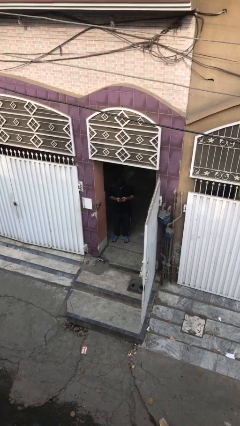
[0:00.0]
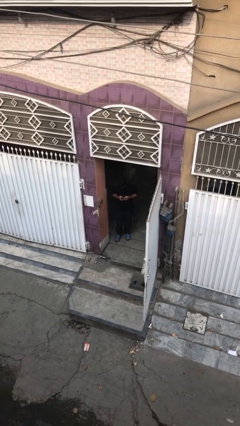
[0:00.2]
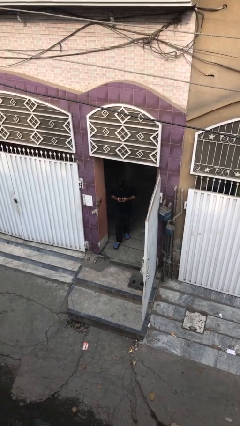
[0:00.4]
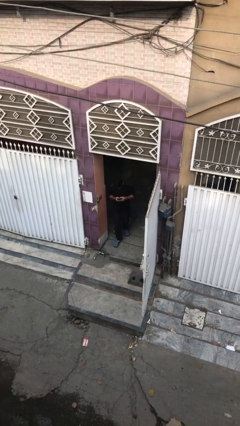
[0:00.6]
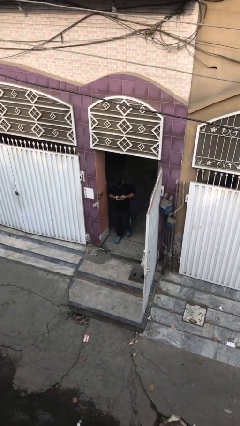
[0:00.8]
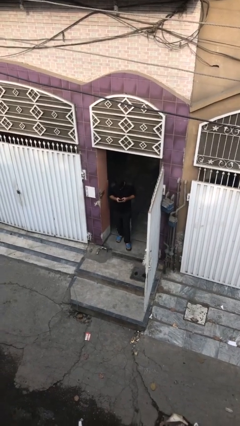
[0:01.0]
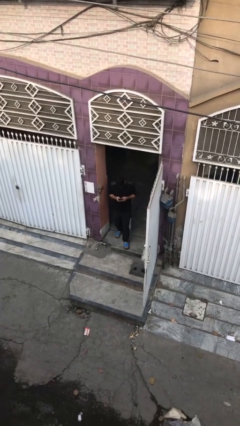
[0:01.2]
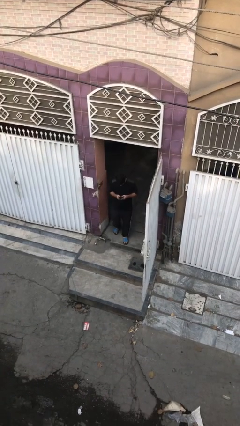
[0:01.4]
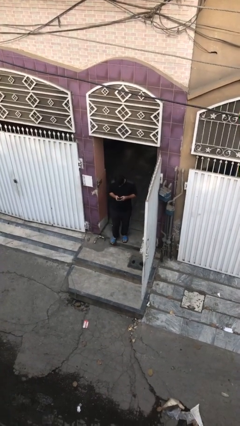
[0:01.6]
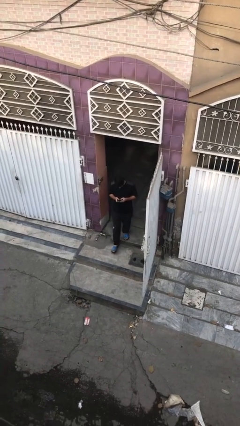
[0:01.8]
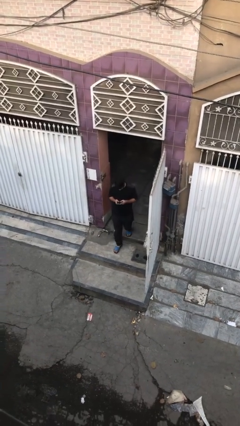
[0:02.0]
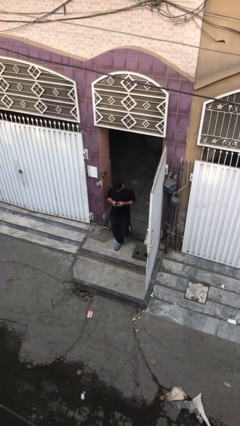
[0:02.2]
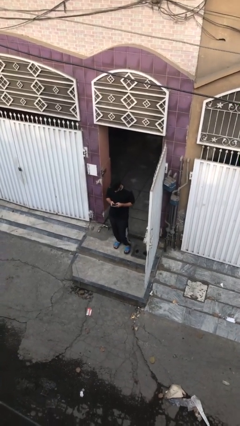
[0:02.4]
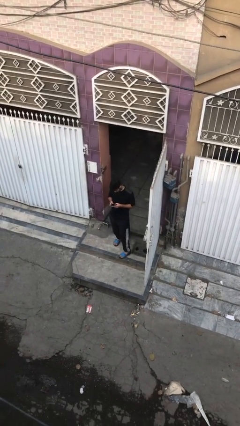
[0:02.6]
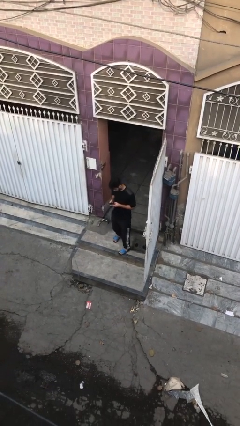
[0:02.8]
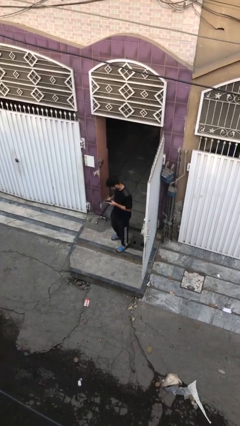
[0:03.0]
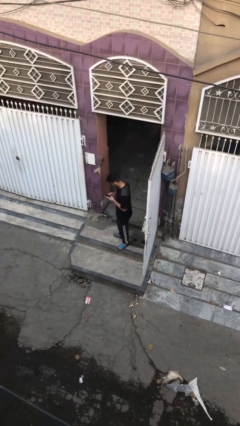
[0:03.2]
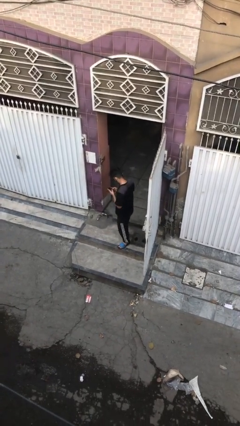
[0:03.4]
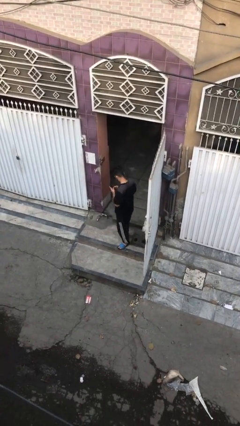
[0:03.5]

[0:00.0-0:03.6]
person enters scene through structure

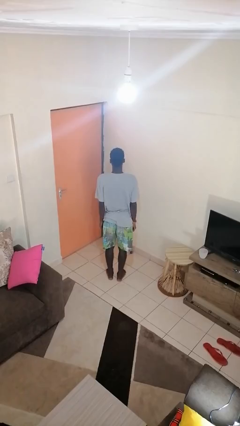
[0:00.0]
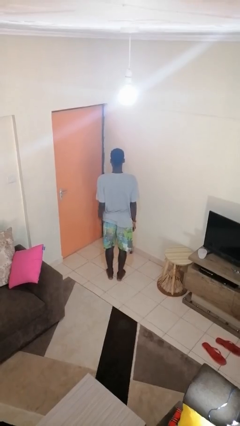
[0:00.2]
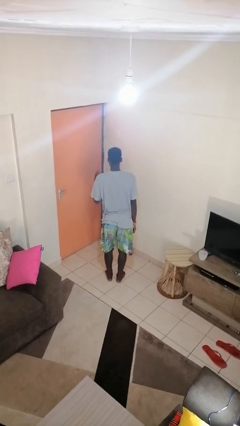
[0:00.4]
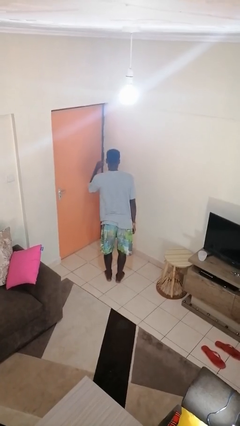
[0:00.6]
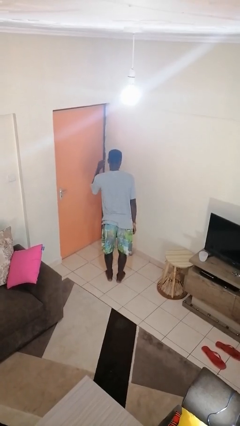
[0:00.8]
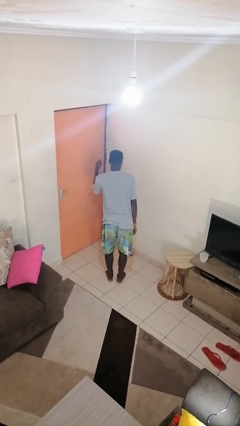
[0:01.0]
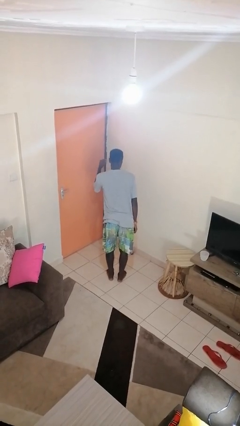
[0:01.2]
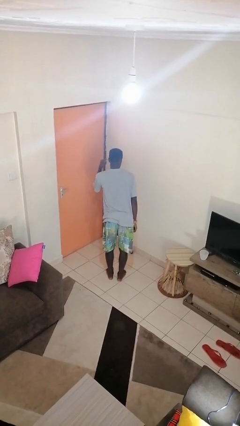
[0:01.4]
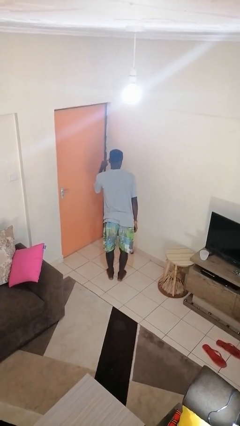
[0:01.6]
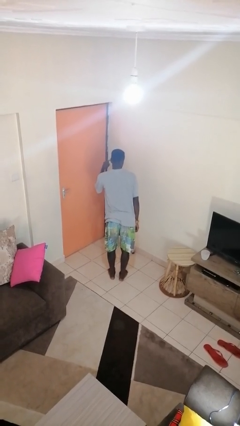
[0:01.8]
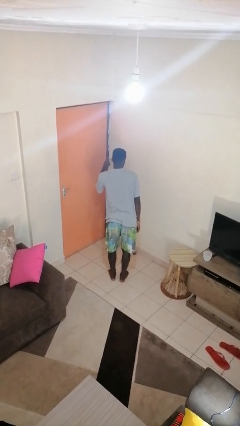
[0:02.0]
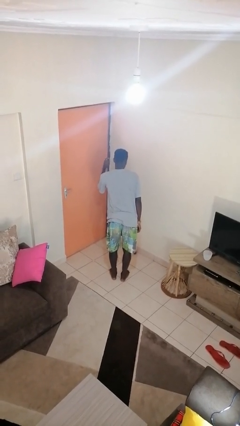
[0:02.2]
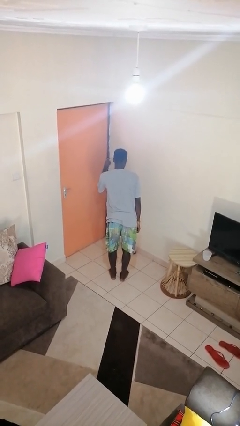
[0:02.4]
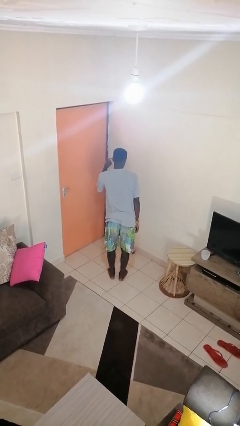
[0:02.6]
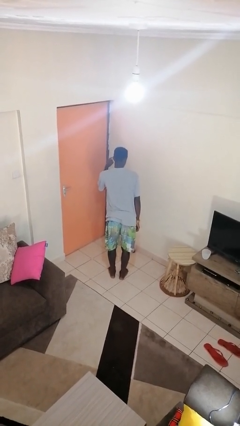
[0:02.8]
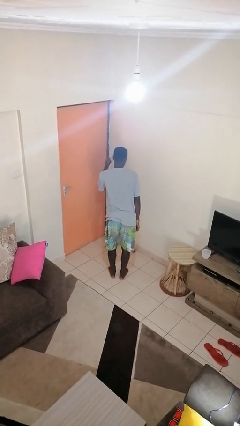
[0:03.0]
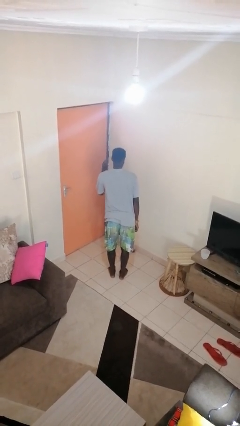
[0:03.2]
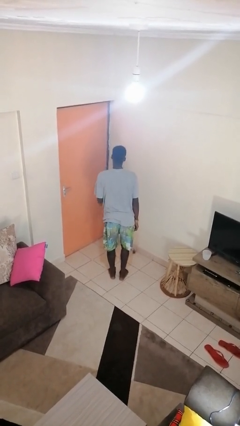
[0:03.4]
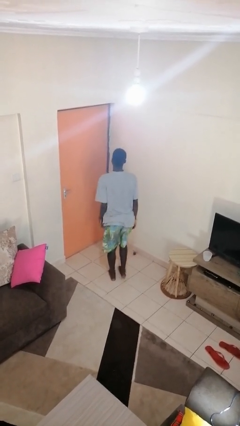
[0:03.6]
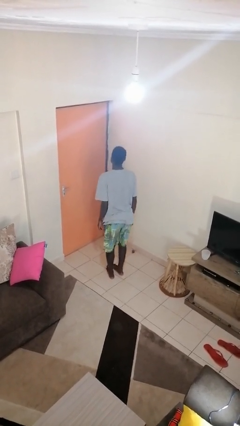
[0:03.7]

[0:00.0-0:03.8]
person gestures listen closely

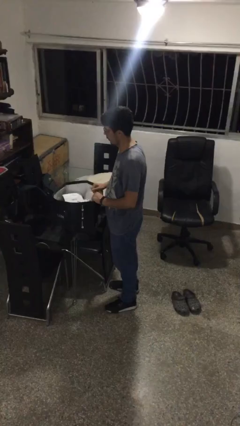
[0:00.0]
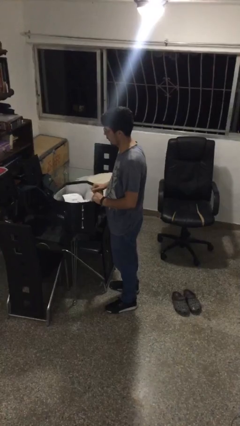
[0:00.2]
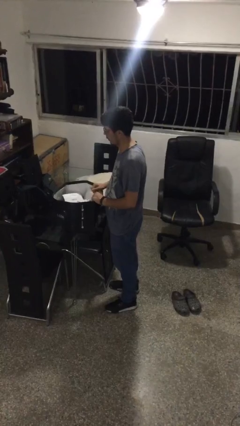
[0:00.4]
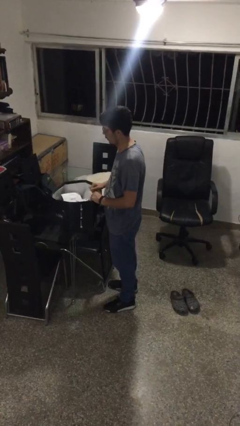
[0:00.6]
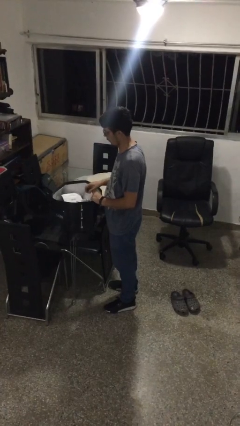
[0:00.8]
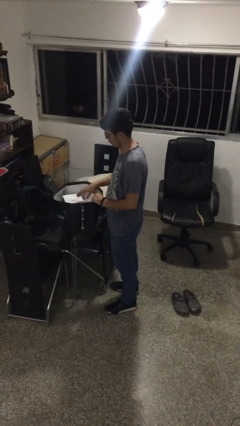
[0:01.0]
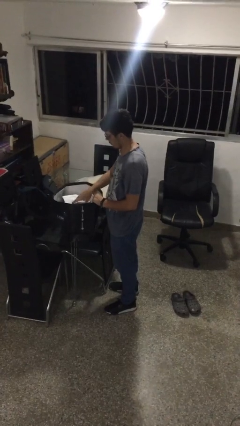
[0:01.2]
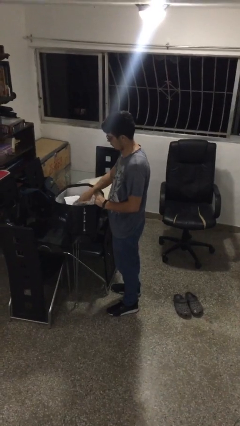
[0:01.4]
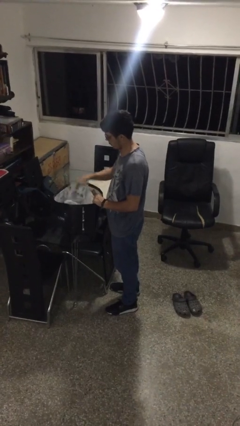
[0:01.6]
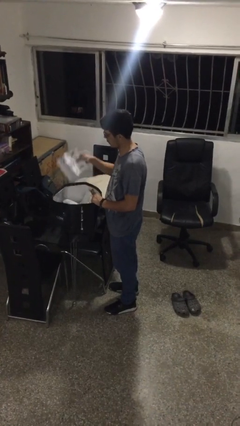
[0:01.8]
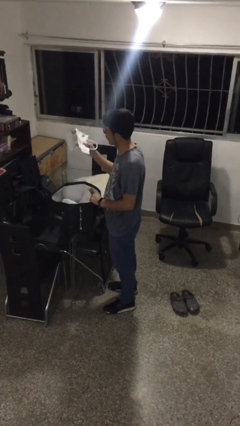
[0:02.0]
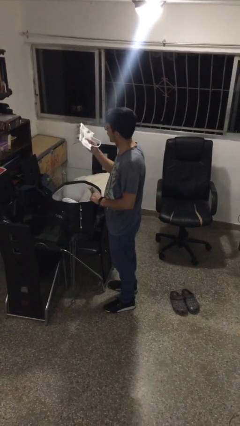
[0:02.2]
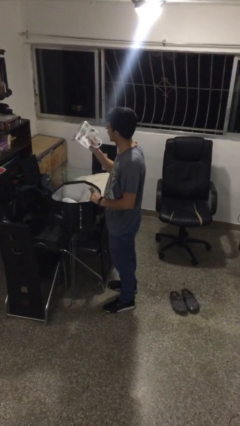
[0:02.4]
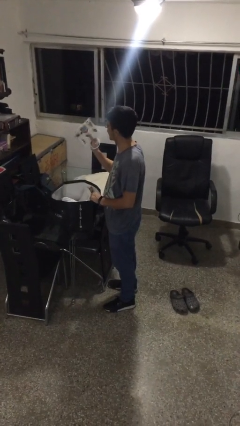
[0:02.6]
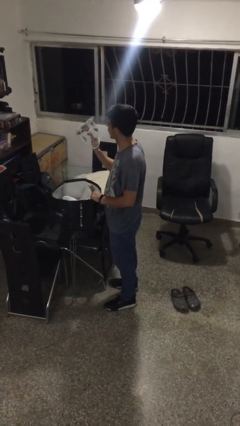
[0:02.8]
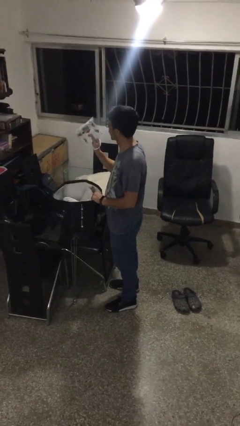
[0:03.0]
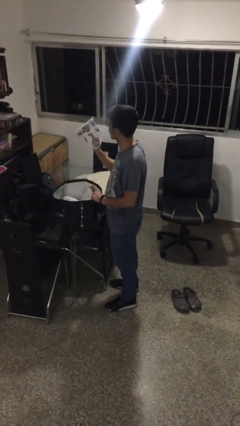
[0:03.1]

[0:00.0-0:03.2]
person takes object from bag

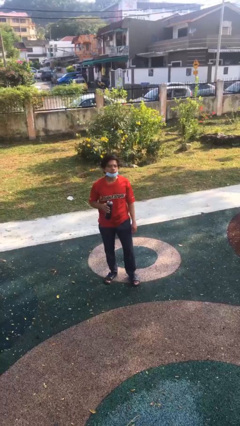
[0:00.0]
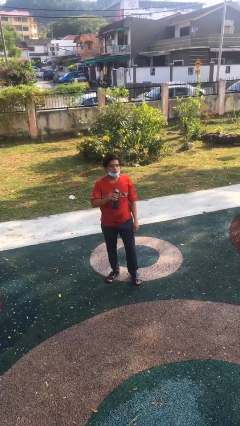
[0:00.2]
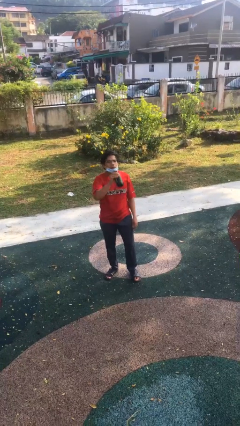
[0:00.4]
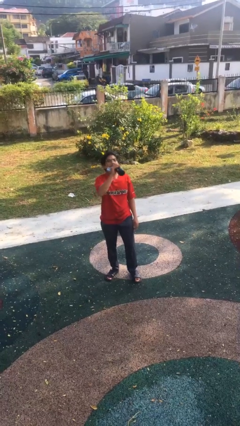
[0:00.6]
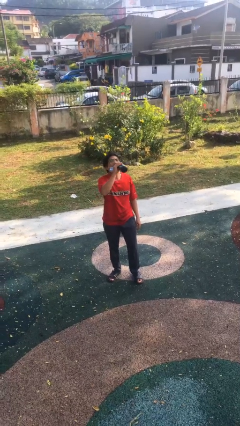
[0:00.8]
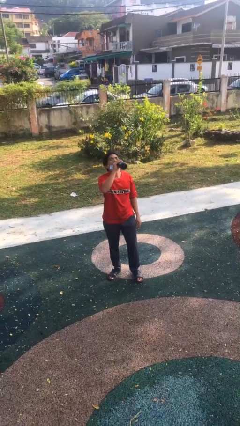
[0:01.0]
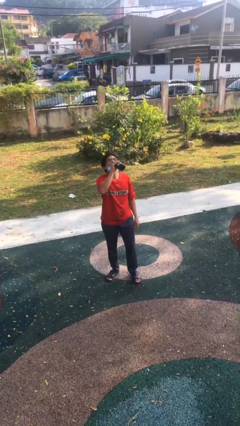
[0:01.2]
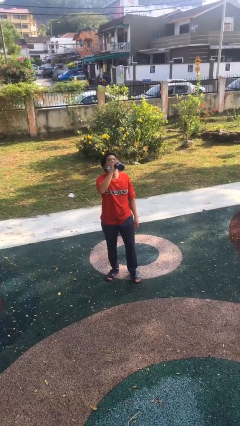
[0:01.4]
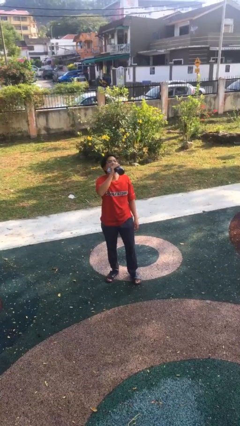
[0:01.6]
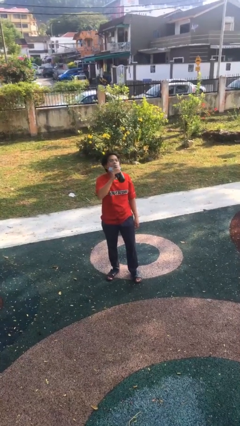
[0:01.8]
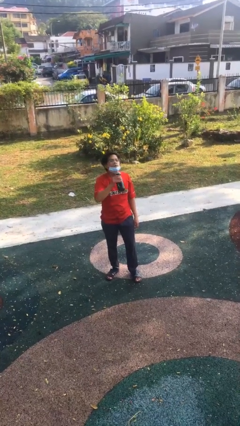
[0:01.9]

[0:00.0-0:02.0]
person drinks from bottle

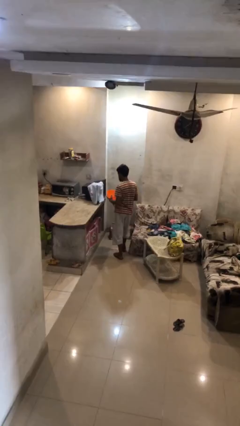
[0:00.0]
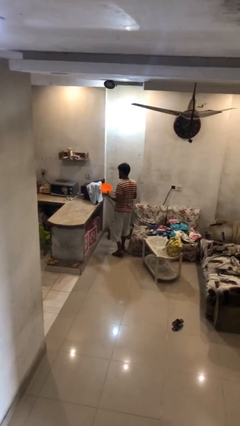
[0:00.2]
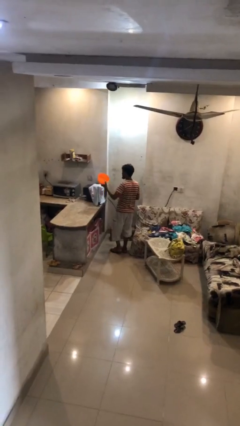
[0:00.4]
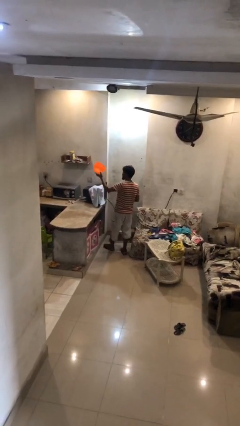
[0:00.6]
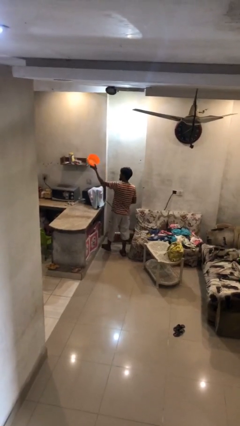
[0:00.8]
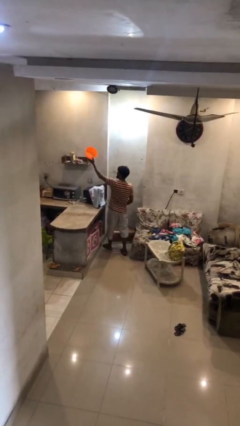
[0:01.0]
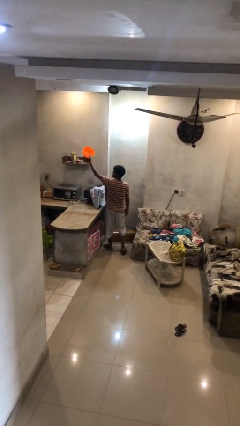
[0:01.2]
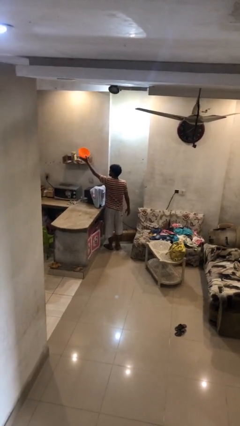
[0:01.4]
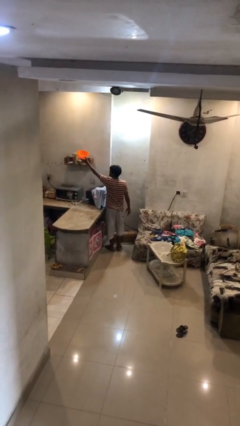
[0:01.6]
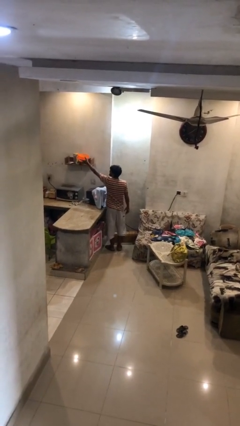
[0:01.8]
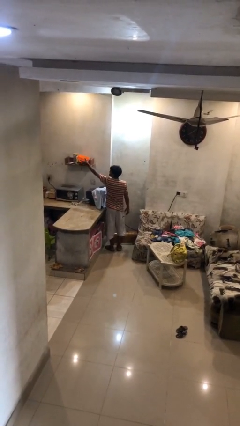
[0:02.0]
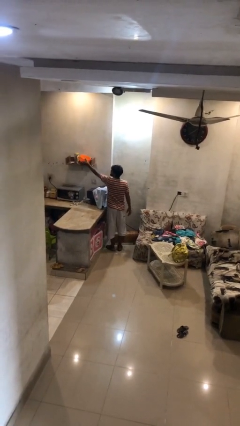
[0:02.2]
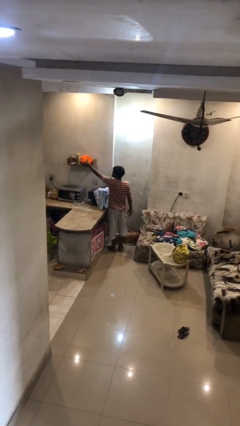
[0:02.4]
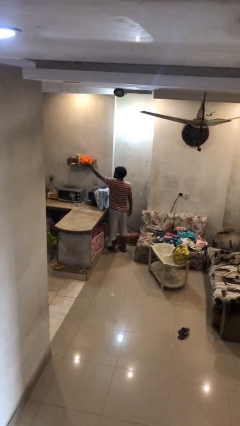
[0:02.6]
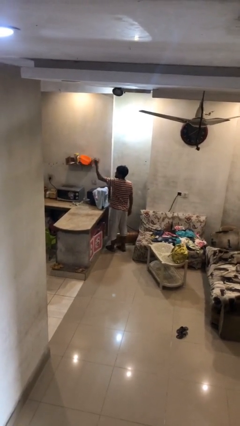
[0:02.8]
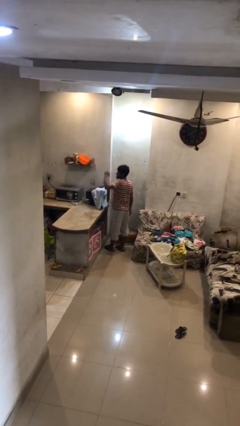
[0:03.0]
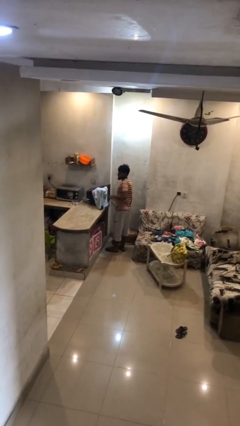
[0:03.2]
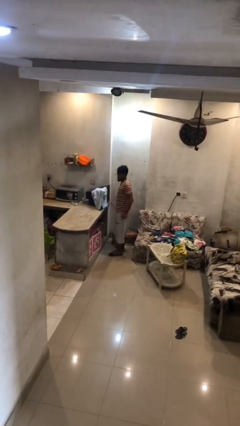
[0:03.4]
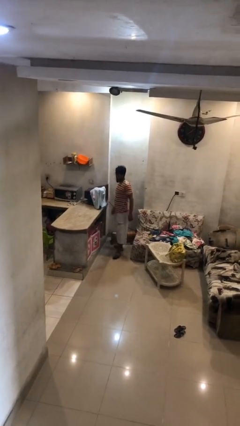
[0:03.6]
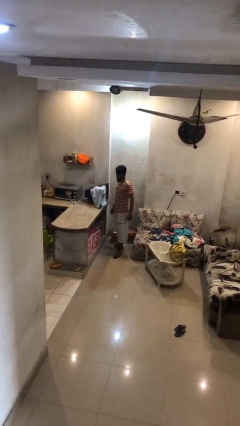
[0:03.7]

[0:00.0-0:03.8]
person puts down object on shelf

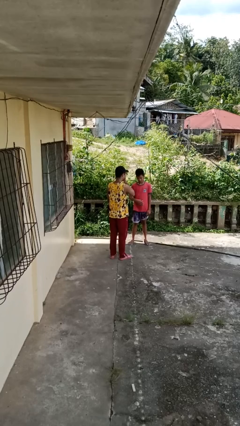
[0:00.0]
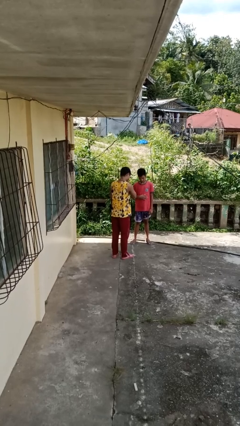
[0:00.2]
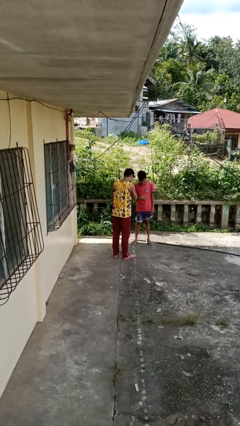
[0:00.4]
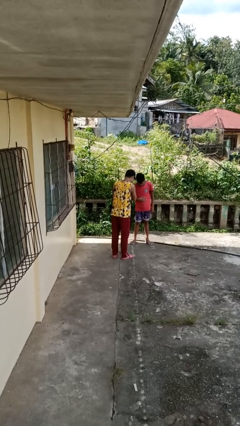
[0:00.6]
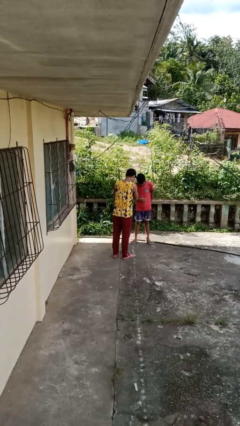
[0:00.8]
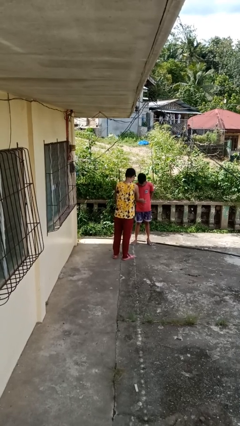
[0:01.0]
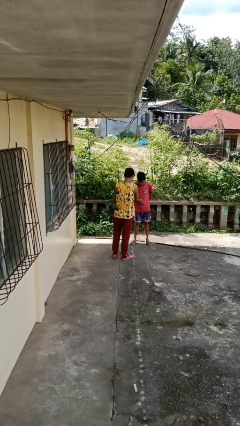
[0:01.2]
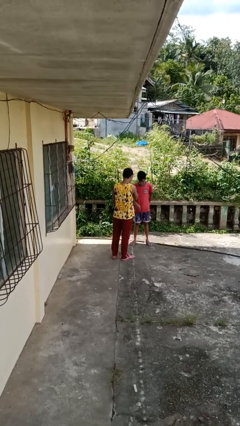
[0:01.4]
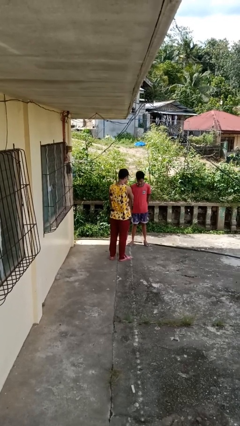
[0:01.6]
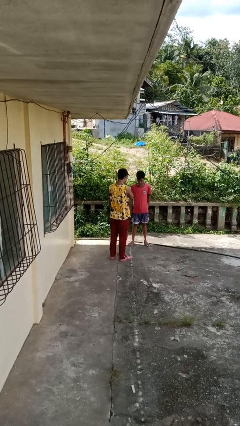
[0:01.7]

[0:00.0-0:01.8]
person laughs with person
